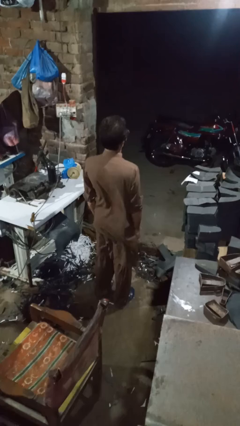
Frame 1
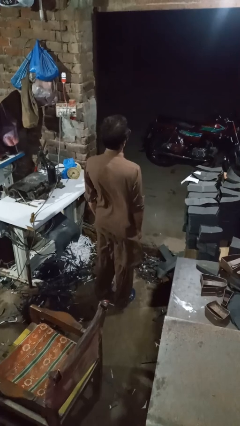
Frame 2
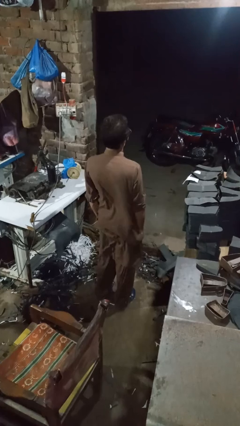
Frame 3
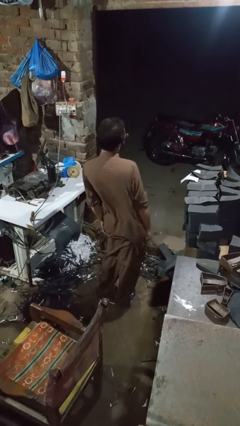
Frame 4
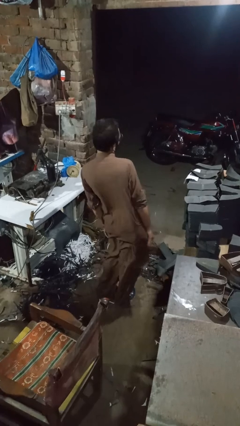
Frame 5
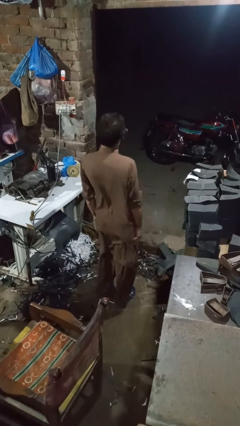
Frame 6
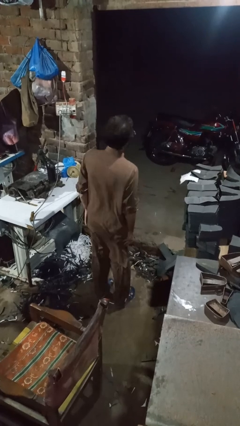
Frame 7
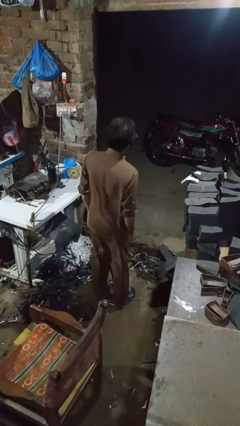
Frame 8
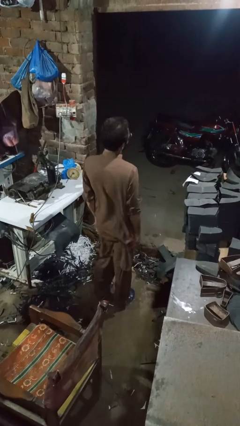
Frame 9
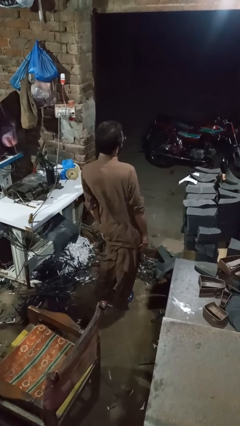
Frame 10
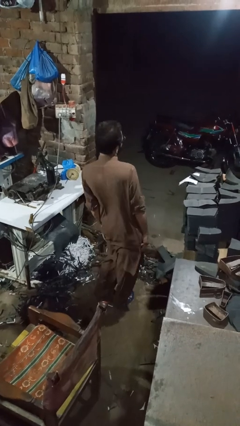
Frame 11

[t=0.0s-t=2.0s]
person wiggles hips

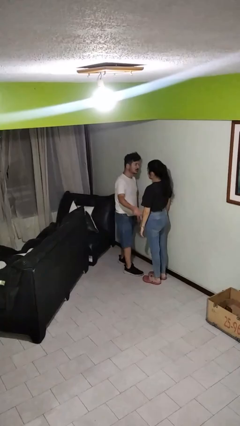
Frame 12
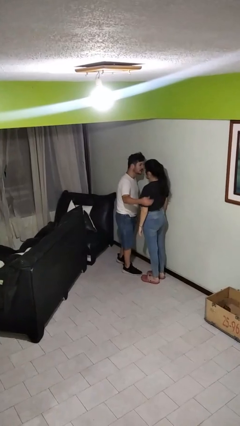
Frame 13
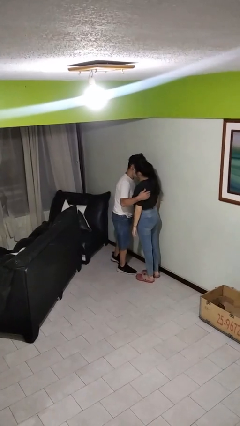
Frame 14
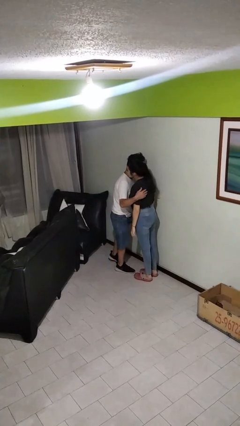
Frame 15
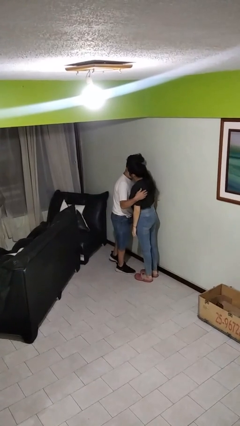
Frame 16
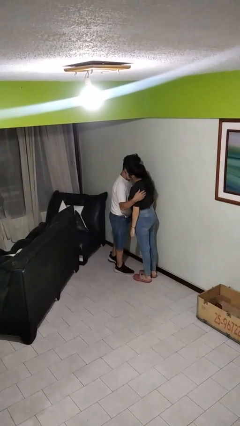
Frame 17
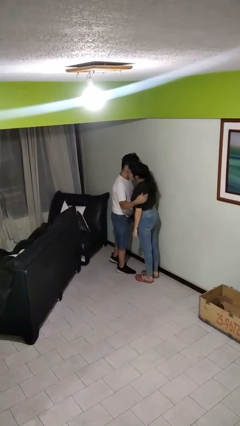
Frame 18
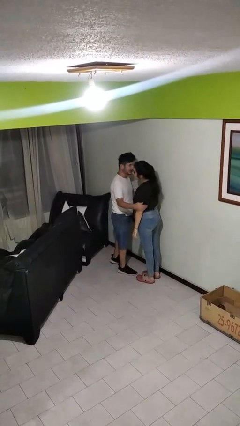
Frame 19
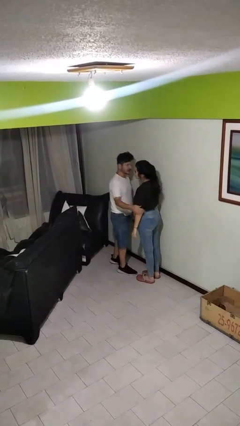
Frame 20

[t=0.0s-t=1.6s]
person kisses cheek of person

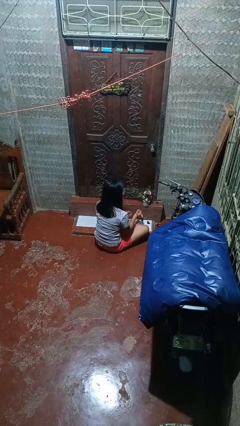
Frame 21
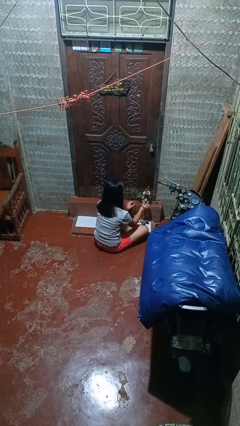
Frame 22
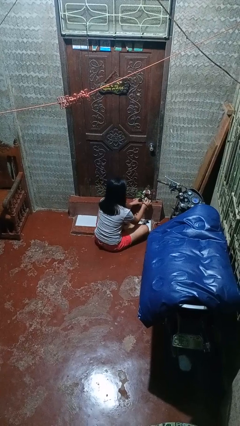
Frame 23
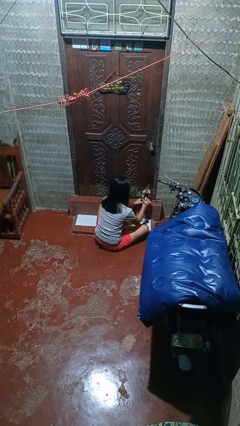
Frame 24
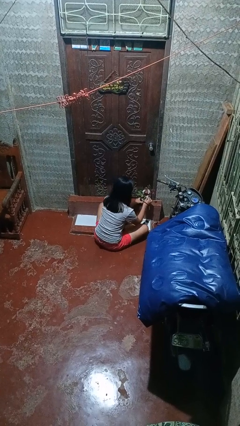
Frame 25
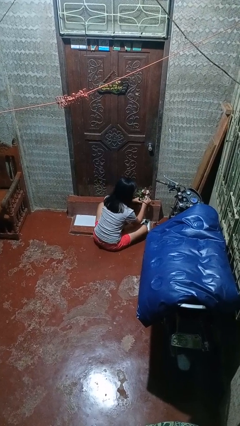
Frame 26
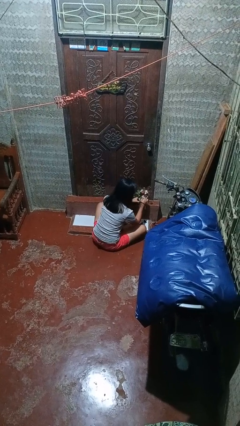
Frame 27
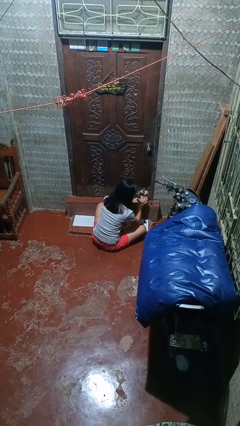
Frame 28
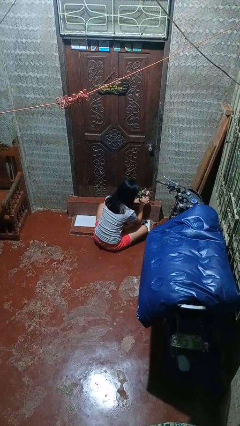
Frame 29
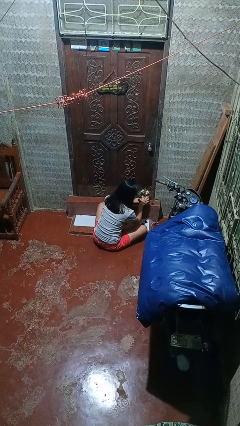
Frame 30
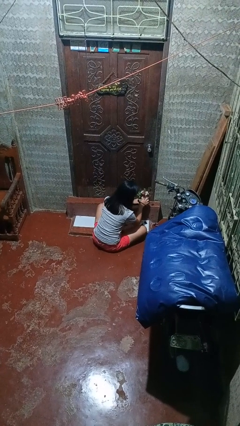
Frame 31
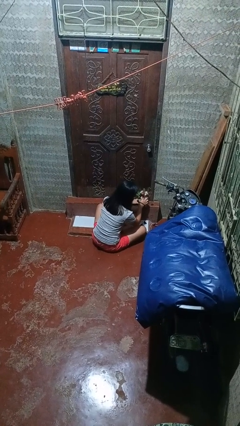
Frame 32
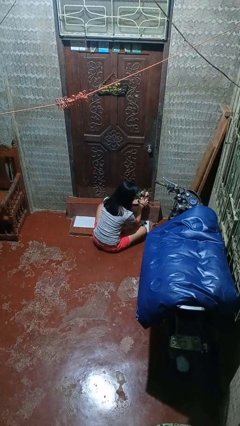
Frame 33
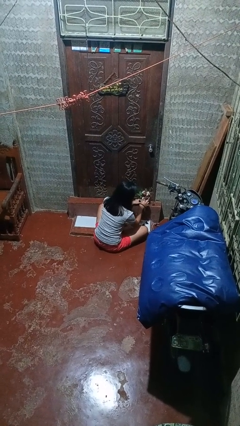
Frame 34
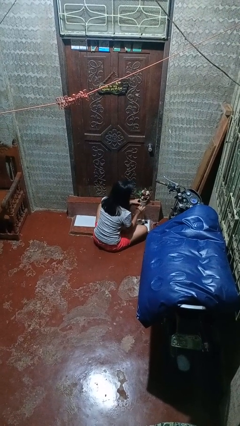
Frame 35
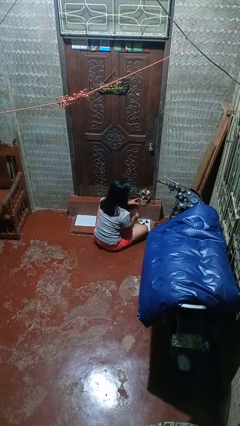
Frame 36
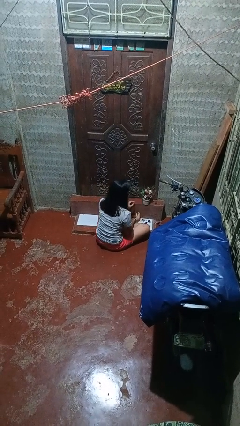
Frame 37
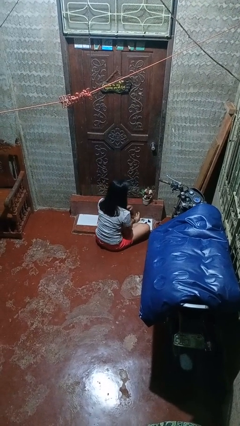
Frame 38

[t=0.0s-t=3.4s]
person arranges flowers in vase

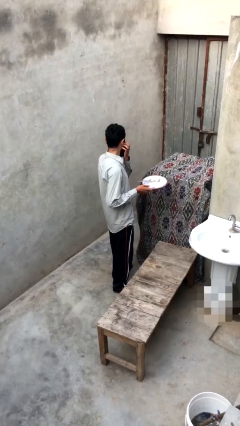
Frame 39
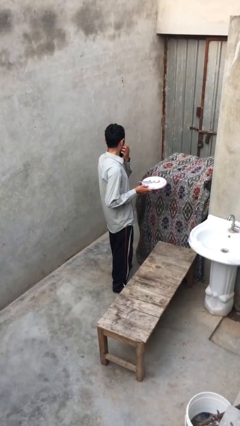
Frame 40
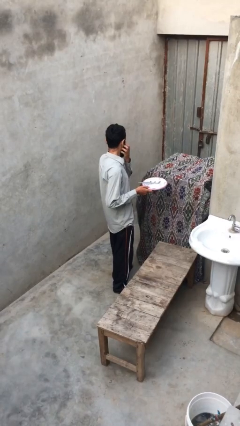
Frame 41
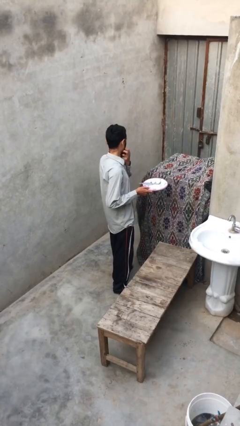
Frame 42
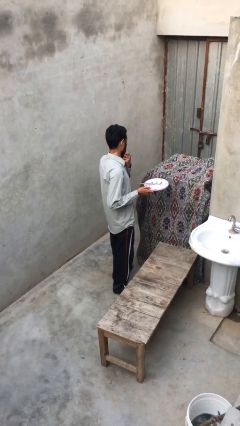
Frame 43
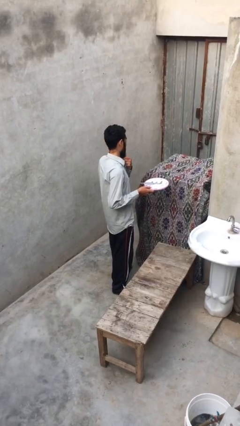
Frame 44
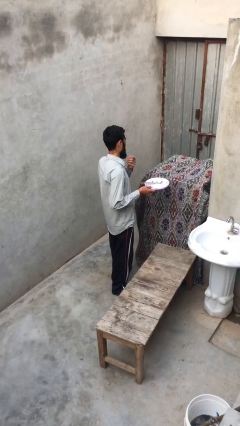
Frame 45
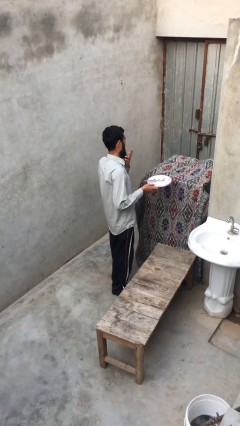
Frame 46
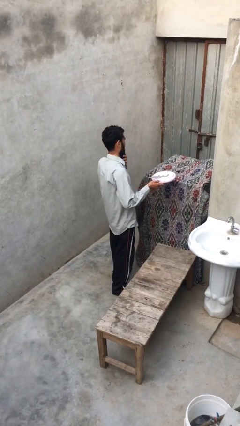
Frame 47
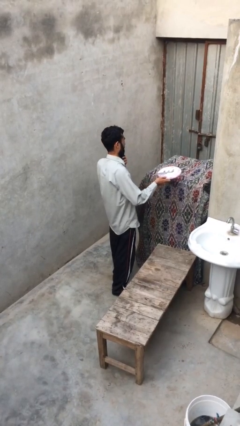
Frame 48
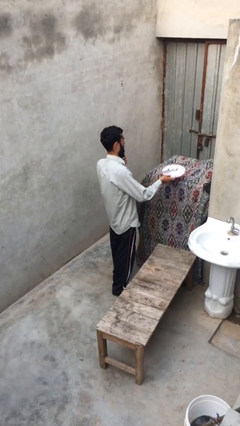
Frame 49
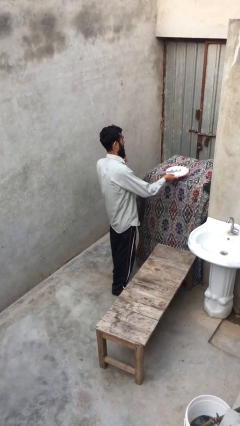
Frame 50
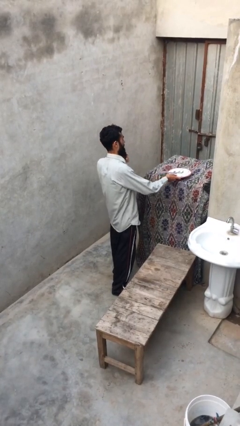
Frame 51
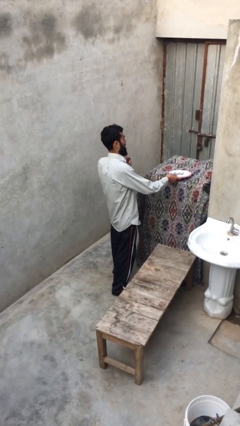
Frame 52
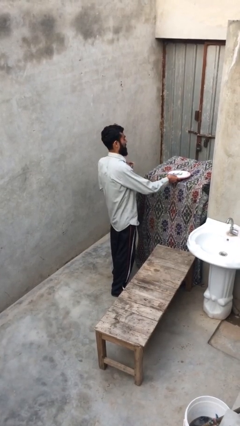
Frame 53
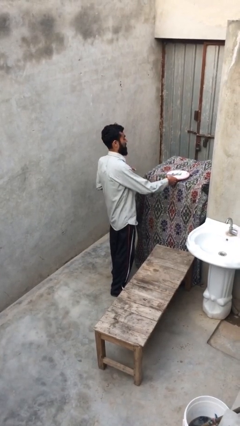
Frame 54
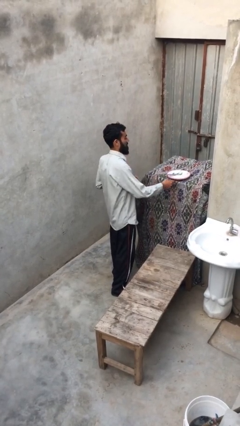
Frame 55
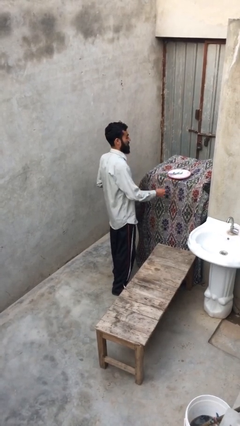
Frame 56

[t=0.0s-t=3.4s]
person puts down object on shelf

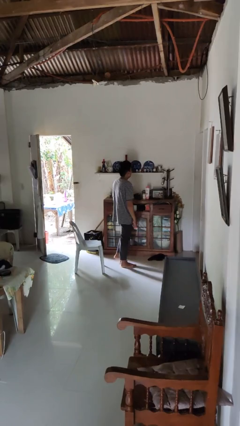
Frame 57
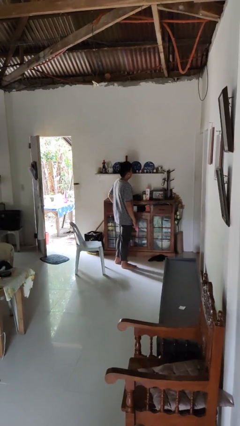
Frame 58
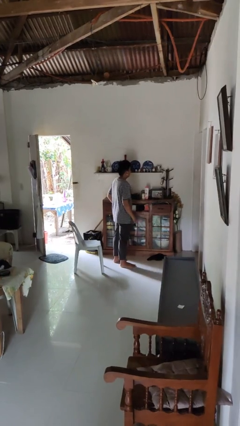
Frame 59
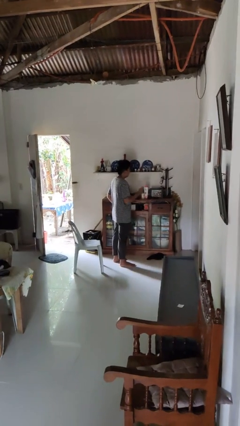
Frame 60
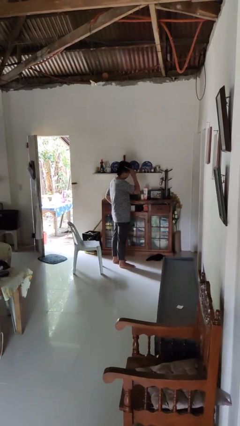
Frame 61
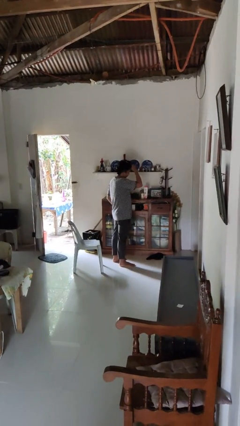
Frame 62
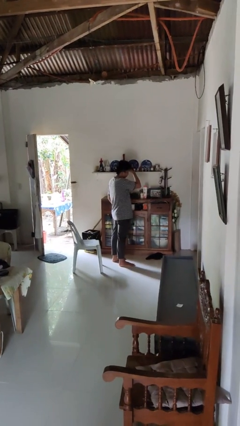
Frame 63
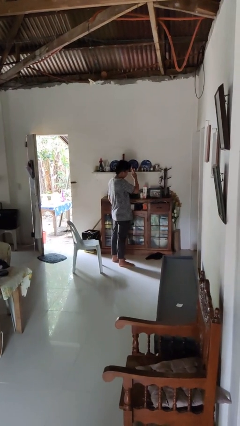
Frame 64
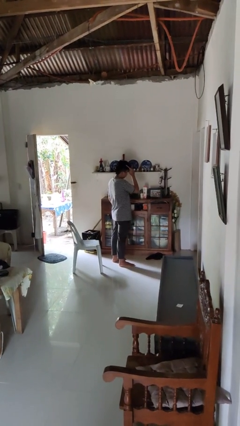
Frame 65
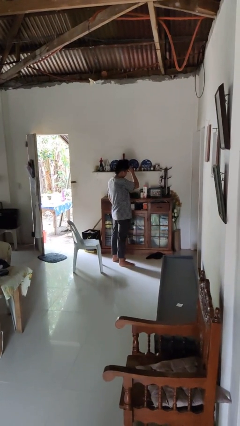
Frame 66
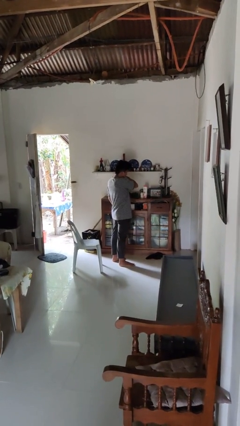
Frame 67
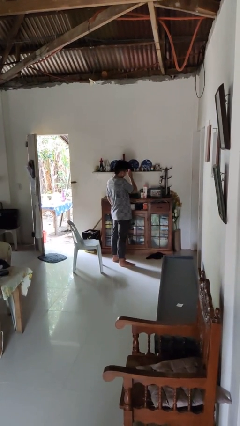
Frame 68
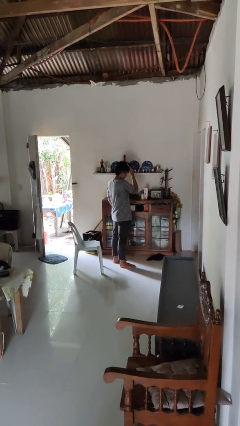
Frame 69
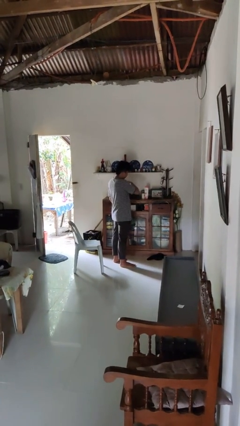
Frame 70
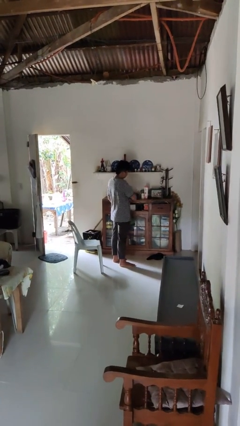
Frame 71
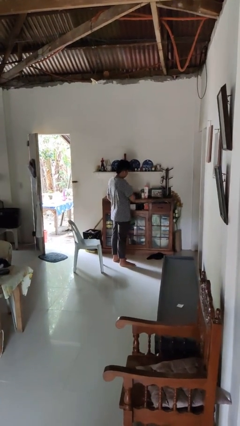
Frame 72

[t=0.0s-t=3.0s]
person brushes hair

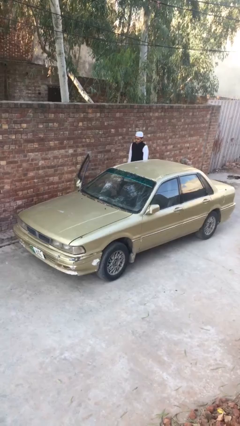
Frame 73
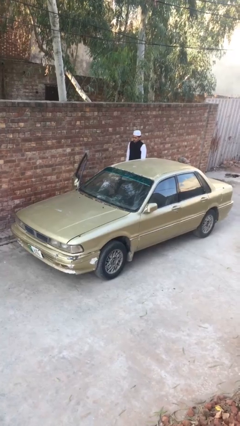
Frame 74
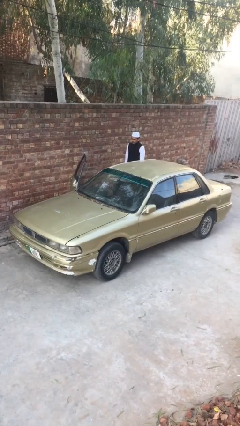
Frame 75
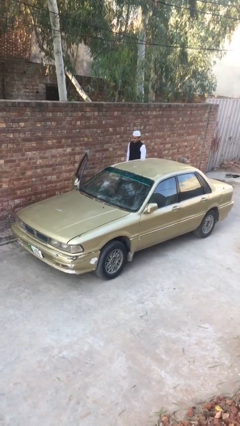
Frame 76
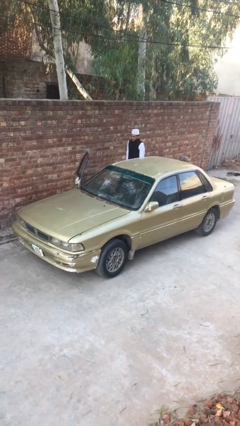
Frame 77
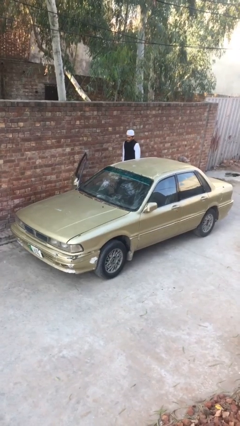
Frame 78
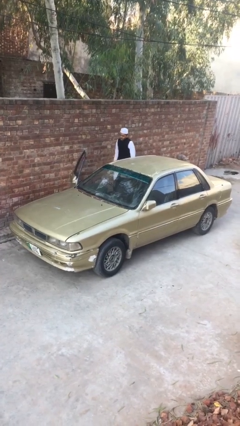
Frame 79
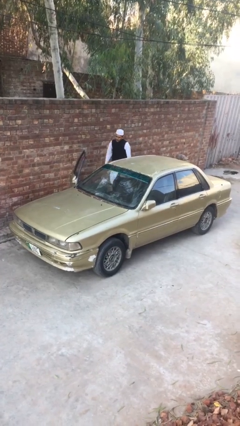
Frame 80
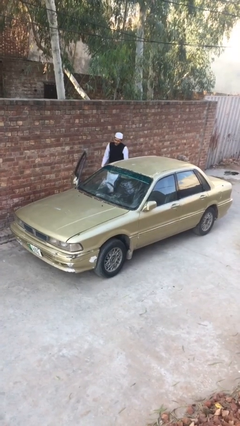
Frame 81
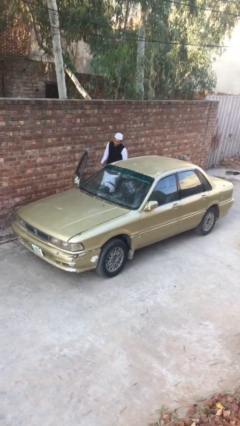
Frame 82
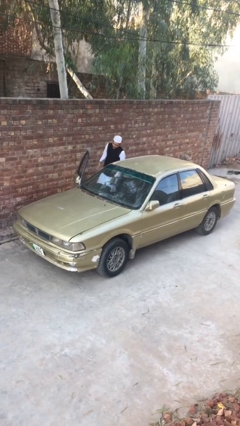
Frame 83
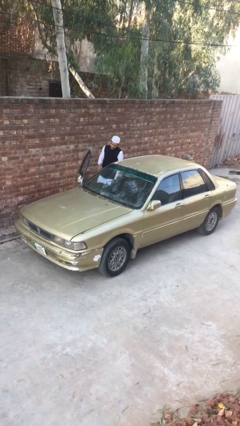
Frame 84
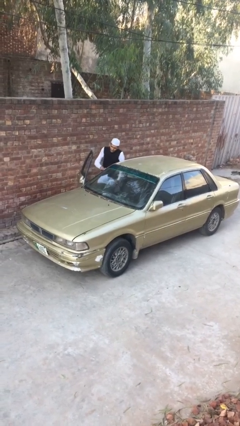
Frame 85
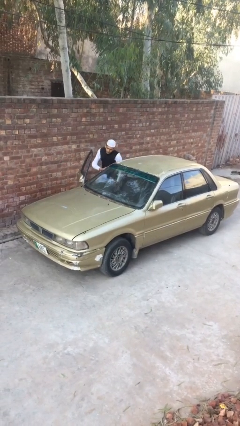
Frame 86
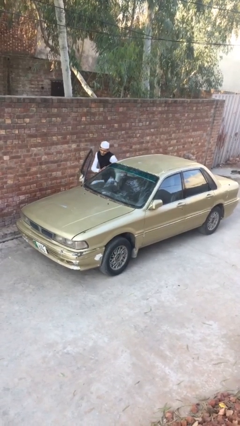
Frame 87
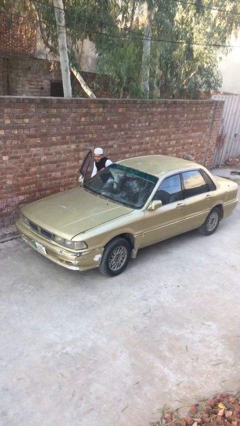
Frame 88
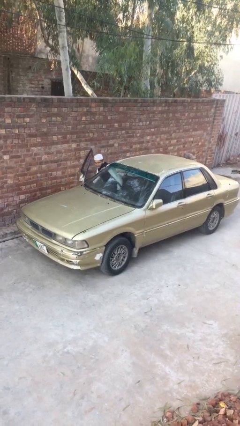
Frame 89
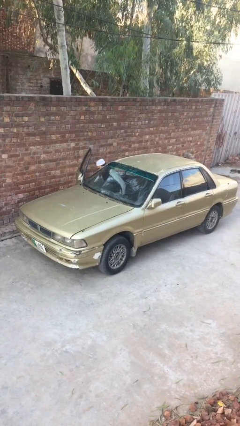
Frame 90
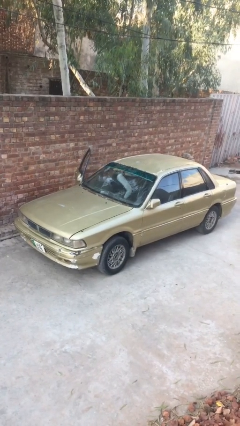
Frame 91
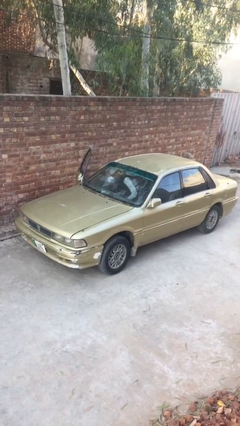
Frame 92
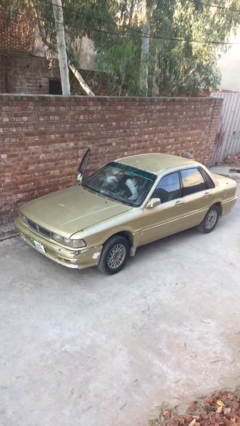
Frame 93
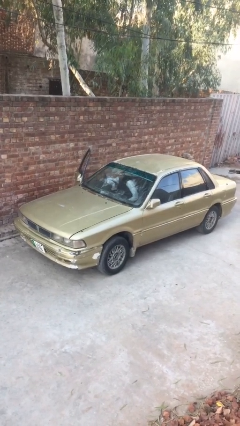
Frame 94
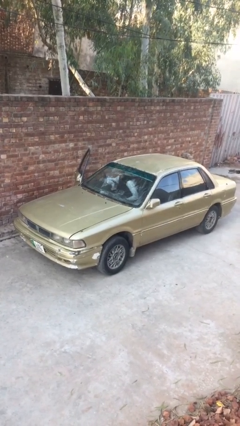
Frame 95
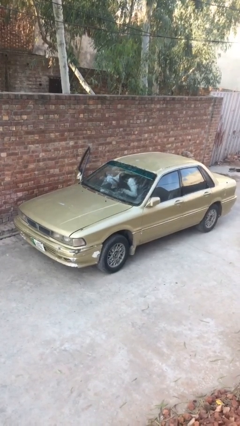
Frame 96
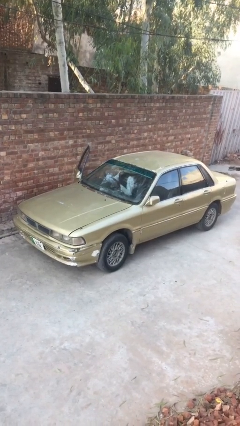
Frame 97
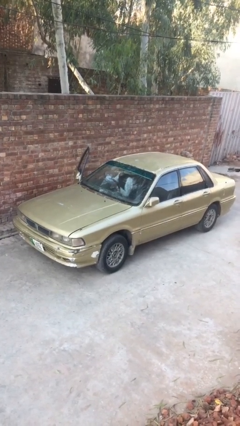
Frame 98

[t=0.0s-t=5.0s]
person enters car
